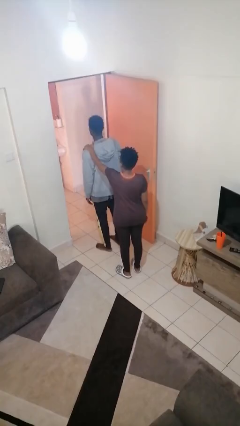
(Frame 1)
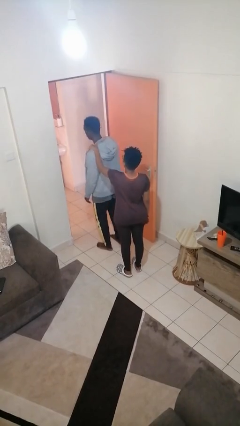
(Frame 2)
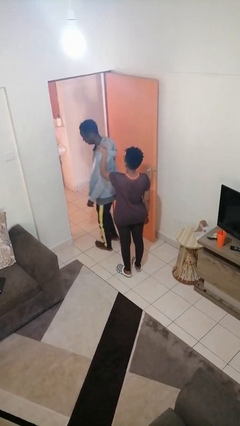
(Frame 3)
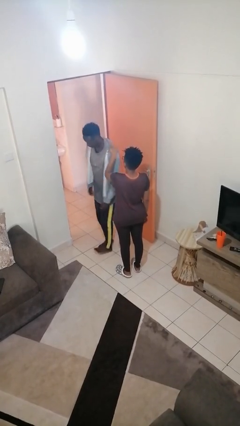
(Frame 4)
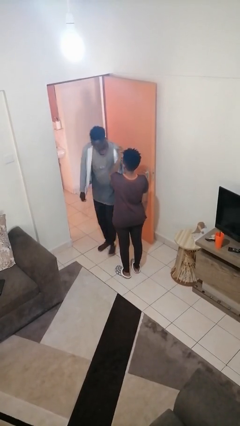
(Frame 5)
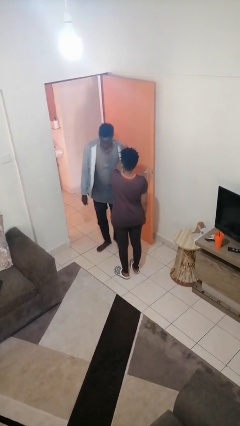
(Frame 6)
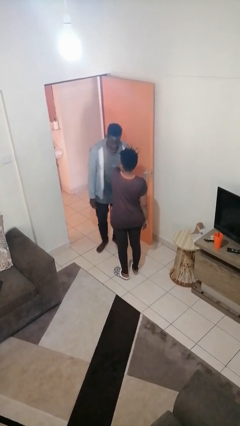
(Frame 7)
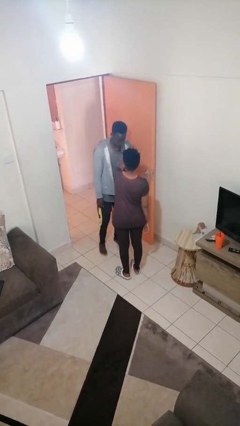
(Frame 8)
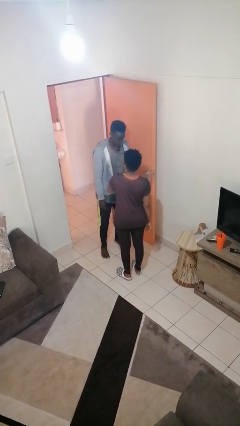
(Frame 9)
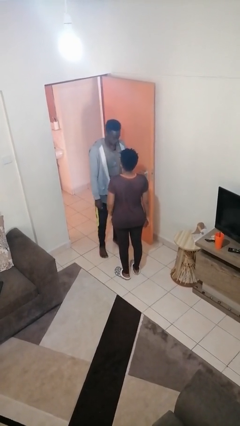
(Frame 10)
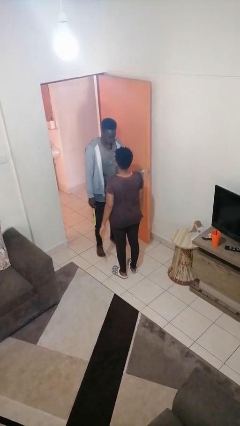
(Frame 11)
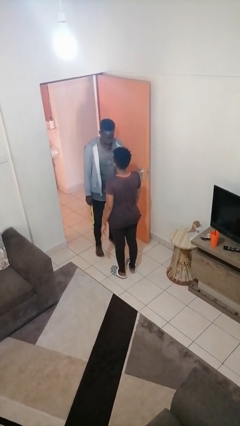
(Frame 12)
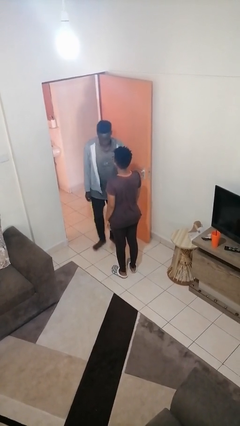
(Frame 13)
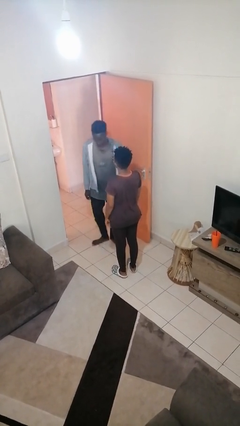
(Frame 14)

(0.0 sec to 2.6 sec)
person spins person around

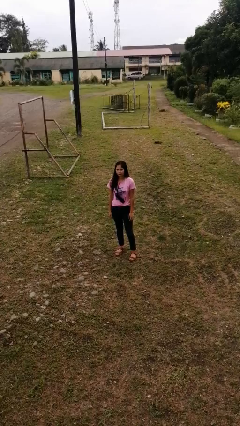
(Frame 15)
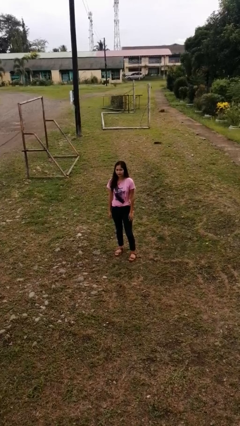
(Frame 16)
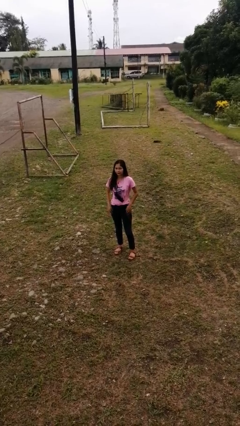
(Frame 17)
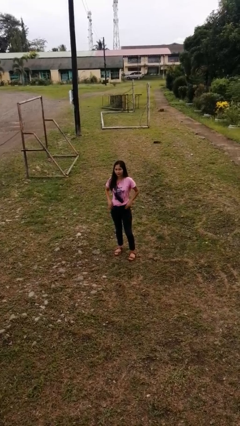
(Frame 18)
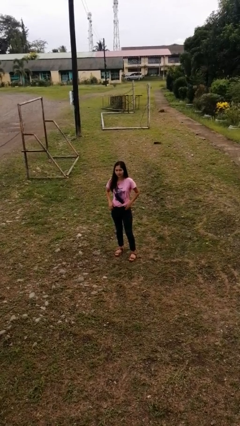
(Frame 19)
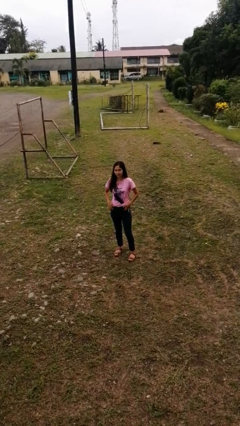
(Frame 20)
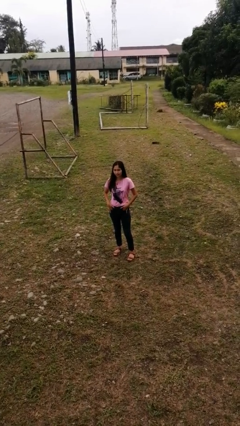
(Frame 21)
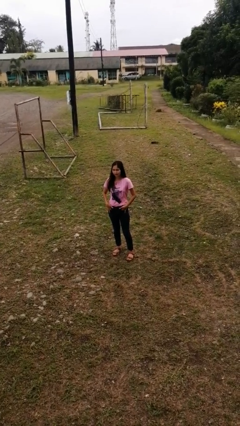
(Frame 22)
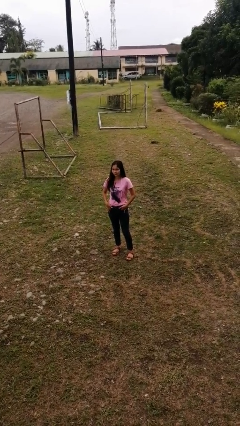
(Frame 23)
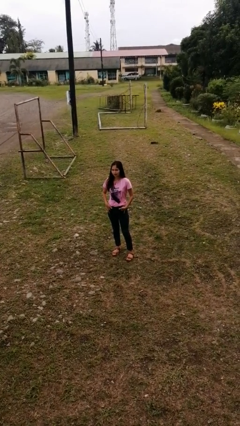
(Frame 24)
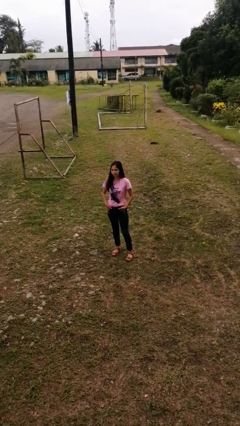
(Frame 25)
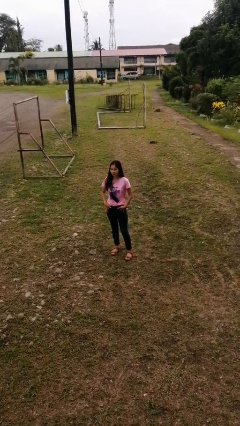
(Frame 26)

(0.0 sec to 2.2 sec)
person puts hands in back pockets

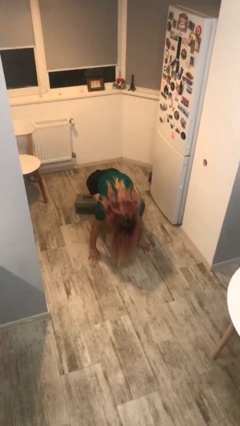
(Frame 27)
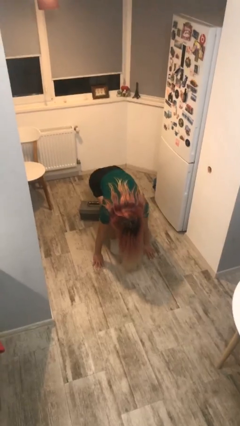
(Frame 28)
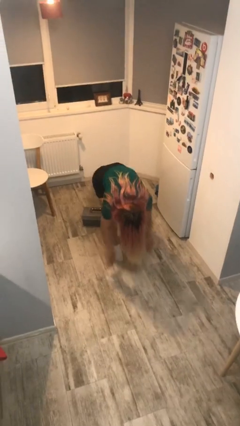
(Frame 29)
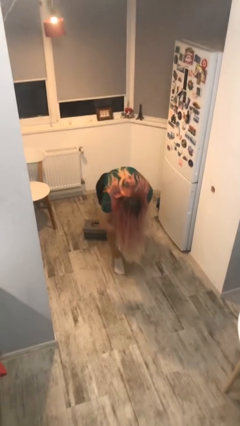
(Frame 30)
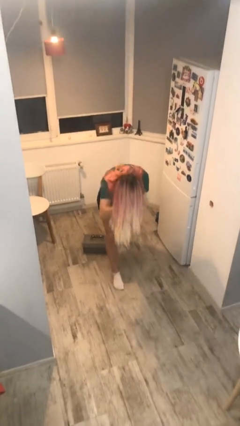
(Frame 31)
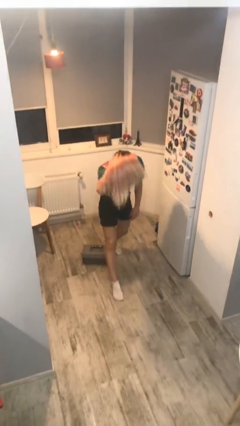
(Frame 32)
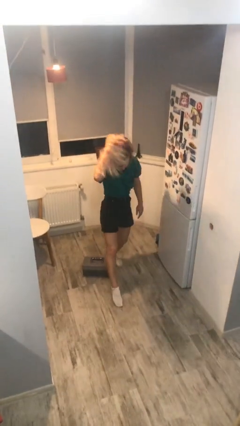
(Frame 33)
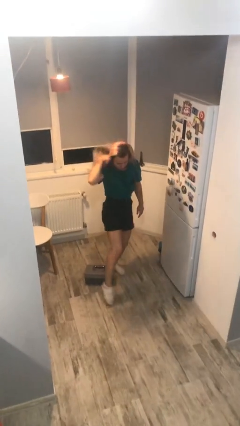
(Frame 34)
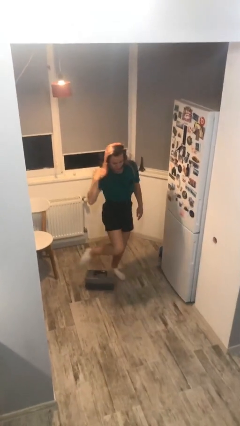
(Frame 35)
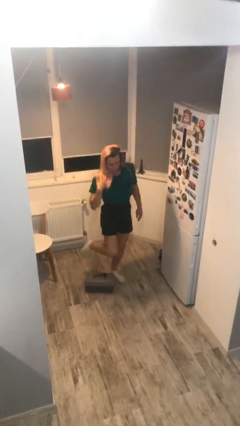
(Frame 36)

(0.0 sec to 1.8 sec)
person stands up from floor

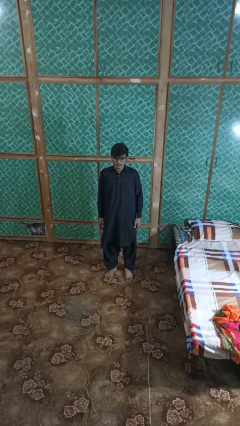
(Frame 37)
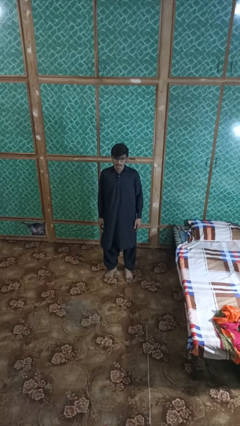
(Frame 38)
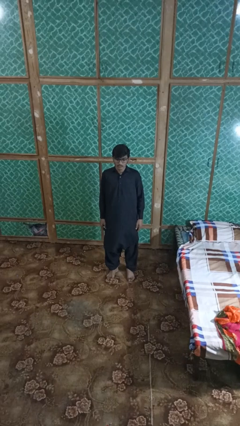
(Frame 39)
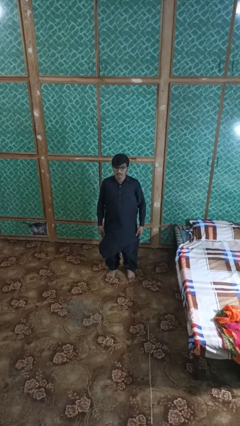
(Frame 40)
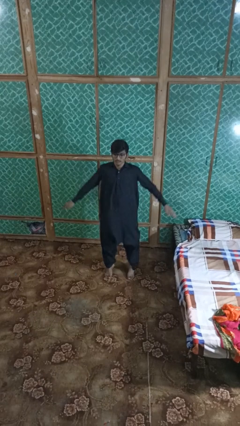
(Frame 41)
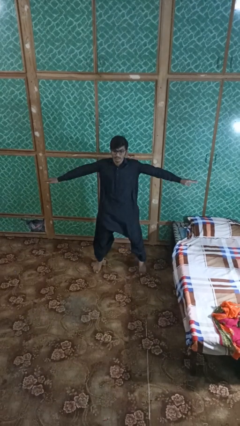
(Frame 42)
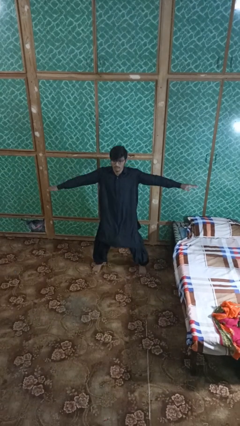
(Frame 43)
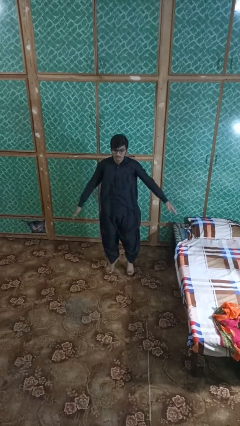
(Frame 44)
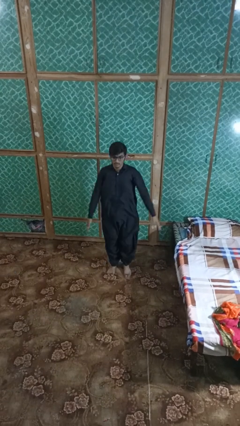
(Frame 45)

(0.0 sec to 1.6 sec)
person exercises with jumping jacks

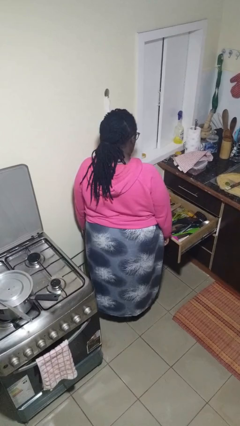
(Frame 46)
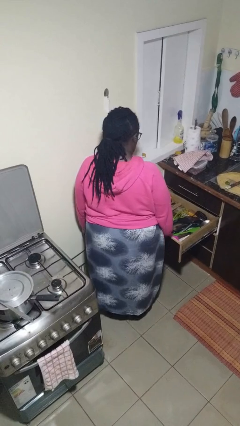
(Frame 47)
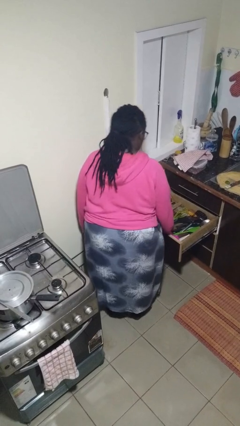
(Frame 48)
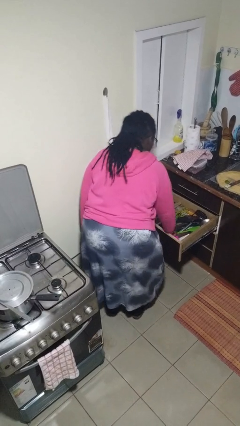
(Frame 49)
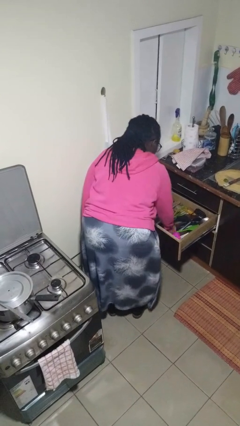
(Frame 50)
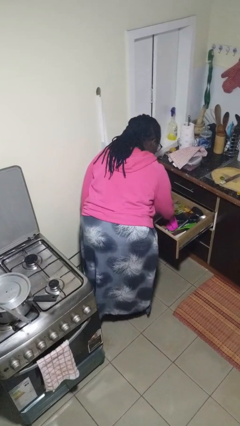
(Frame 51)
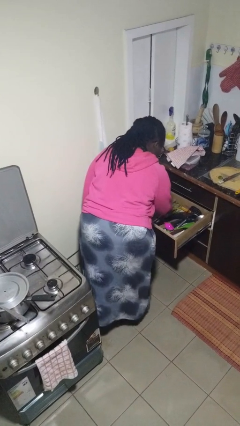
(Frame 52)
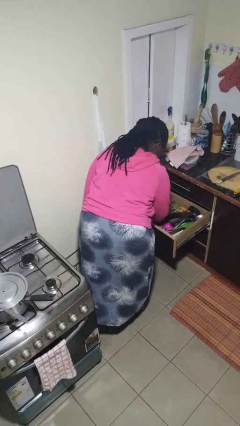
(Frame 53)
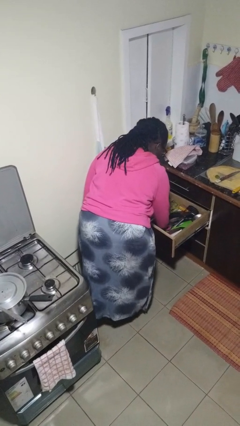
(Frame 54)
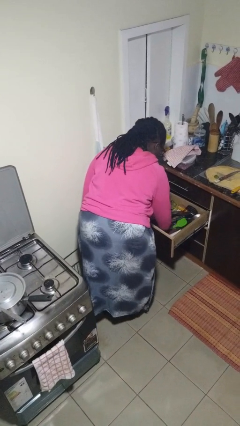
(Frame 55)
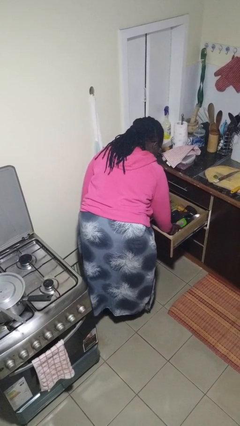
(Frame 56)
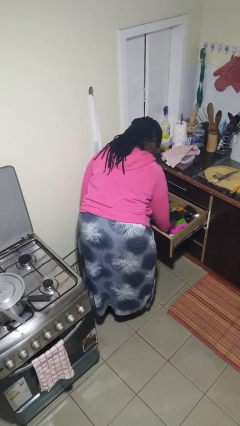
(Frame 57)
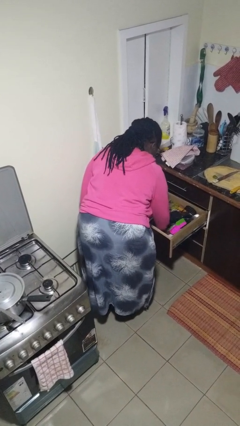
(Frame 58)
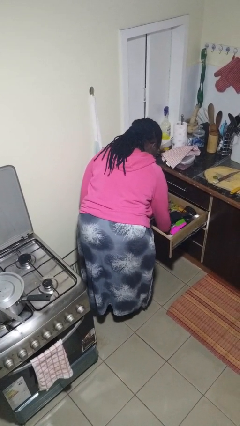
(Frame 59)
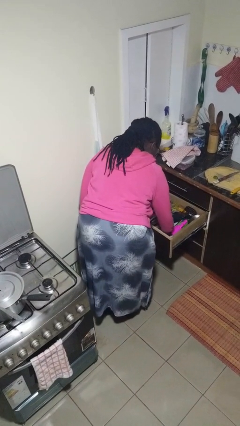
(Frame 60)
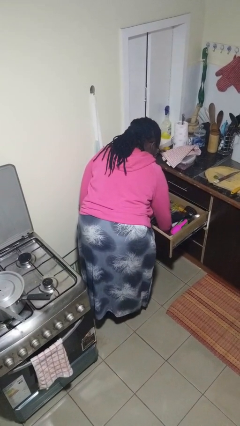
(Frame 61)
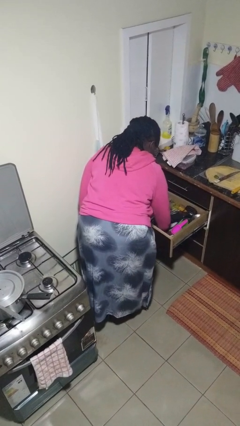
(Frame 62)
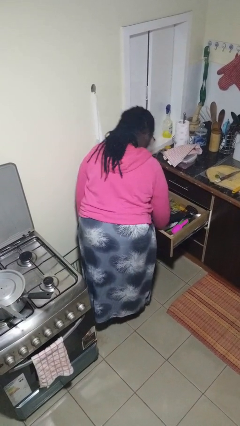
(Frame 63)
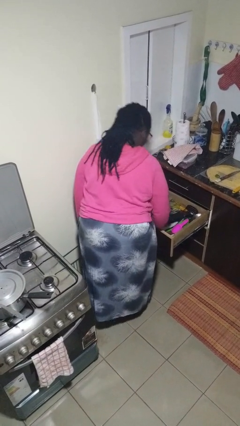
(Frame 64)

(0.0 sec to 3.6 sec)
person searches in kitchen drawer

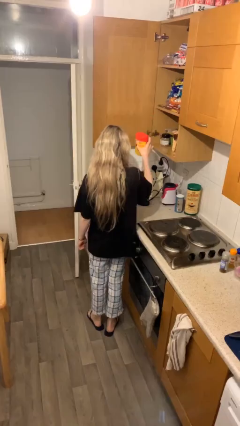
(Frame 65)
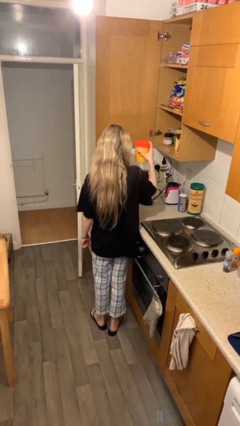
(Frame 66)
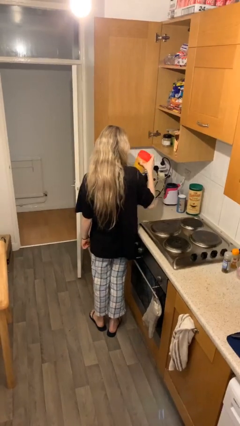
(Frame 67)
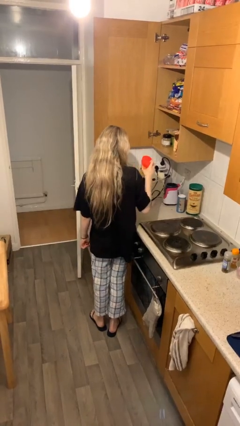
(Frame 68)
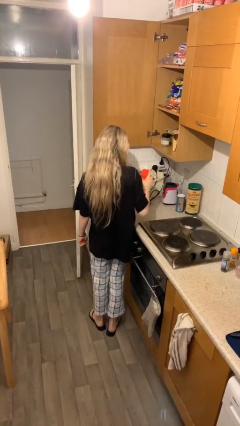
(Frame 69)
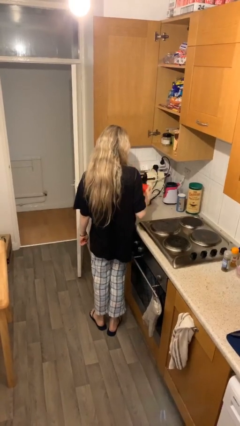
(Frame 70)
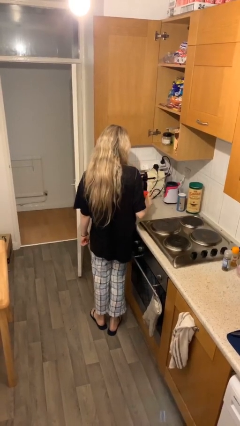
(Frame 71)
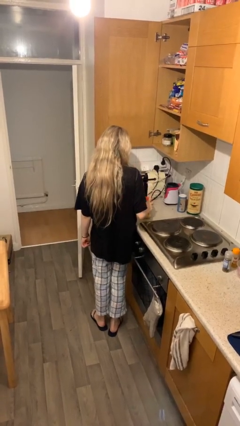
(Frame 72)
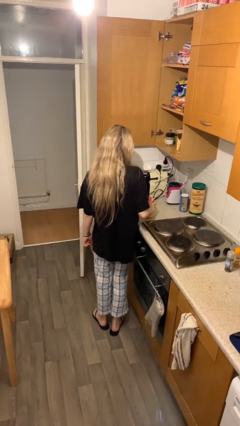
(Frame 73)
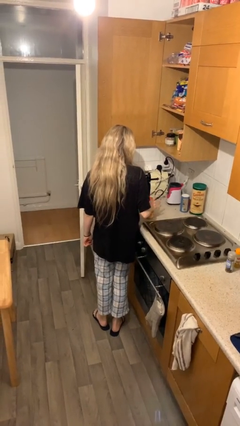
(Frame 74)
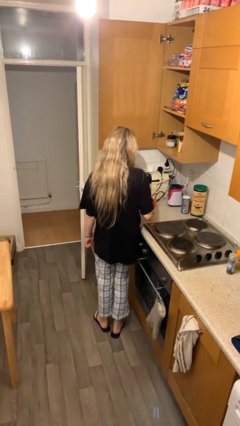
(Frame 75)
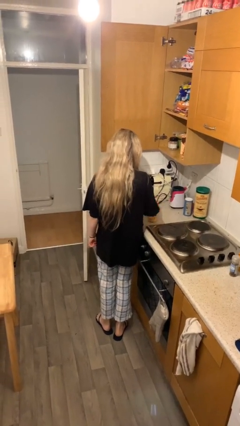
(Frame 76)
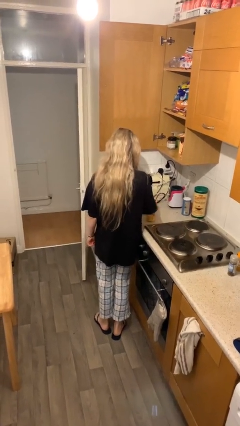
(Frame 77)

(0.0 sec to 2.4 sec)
person puts down object on table

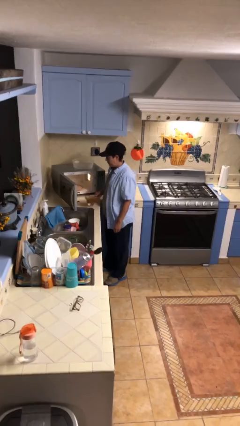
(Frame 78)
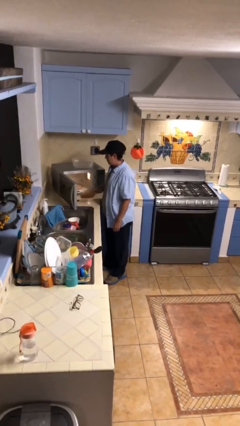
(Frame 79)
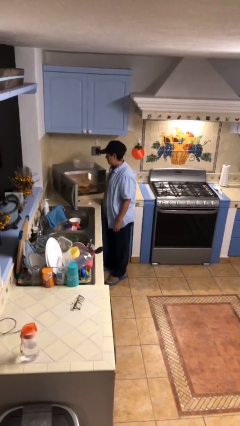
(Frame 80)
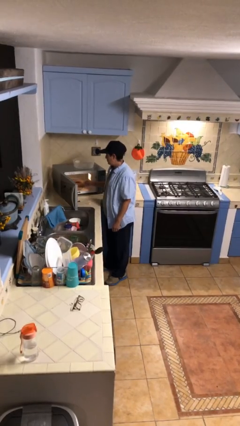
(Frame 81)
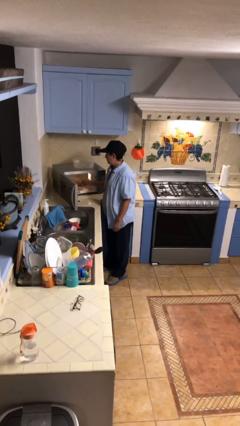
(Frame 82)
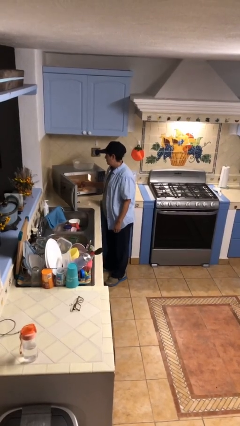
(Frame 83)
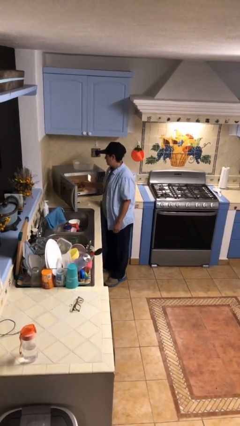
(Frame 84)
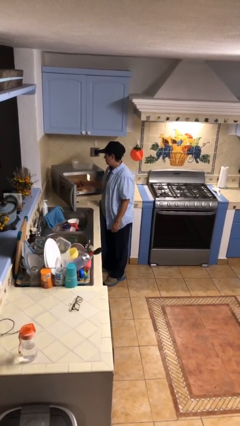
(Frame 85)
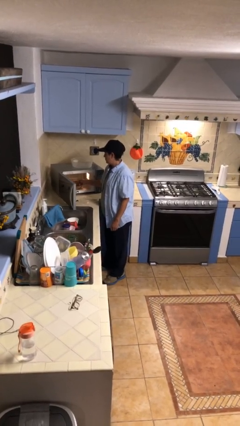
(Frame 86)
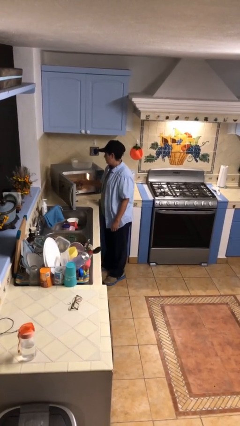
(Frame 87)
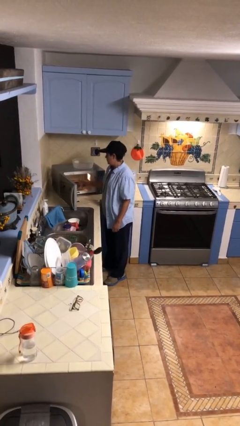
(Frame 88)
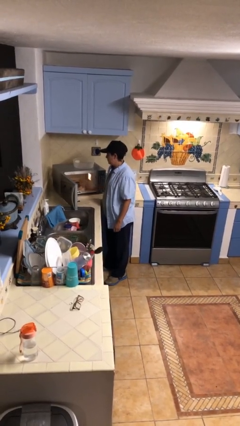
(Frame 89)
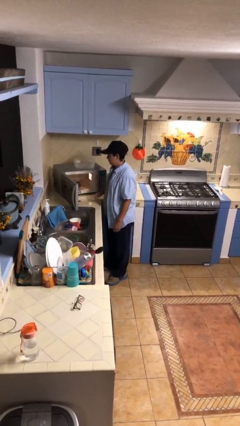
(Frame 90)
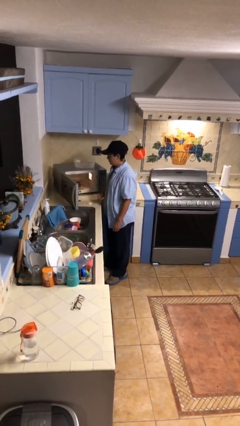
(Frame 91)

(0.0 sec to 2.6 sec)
person puts object into microwave
